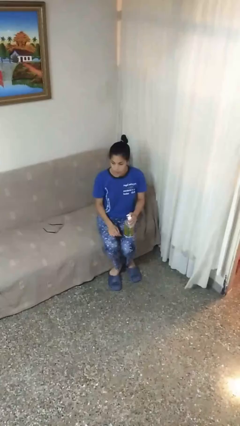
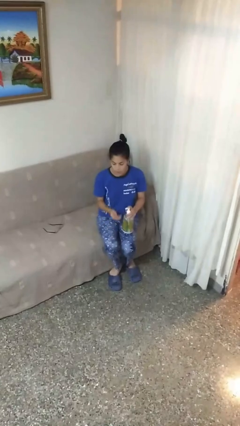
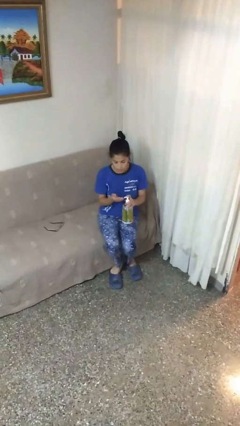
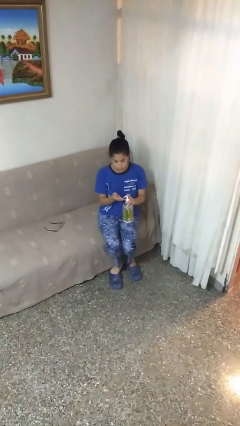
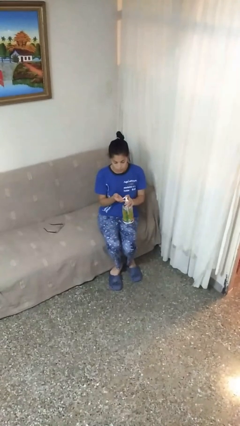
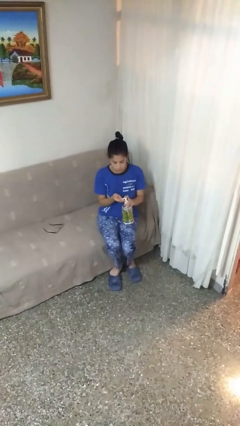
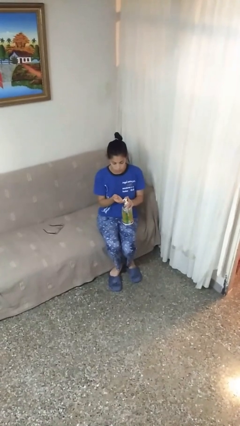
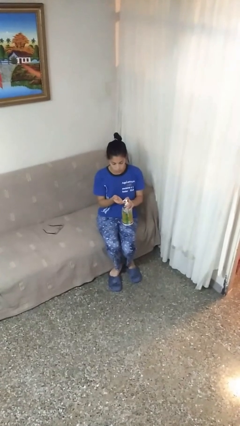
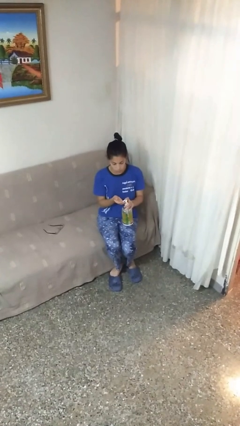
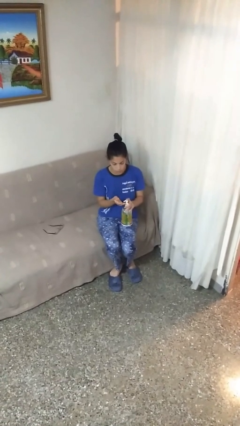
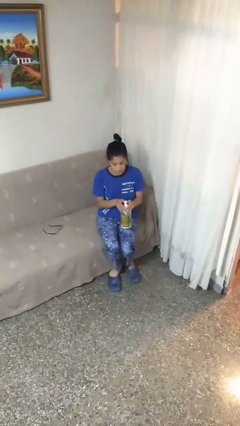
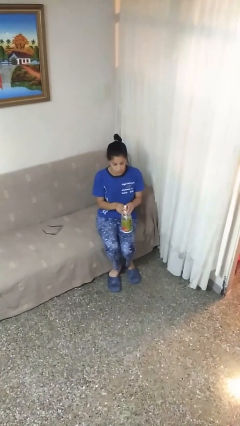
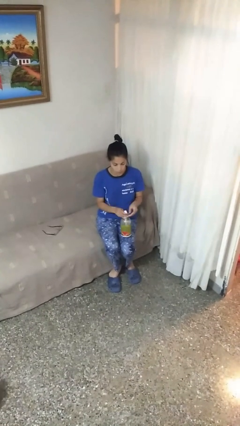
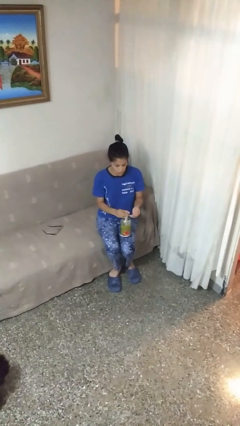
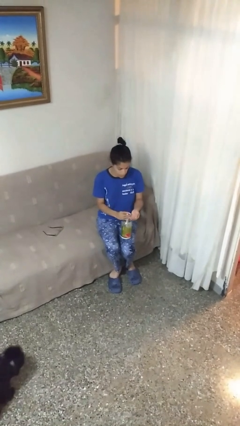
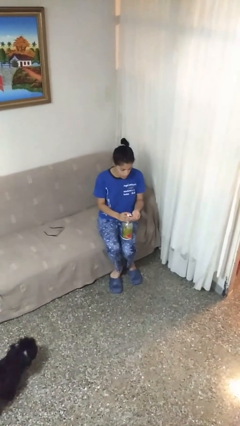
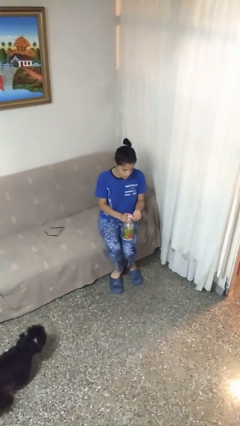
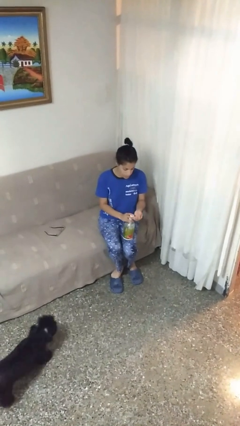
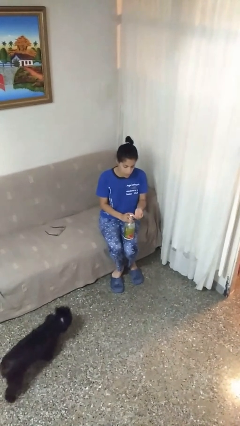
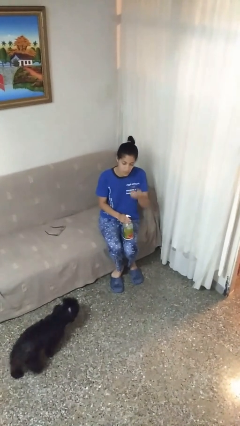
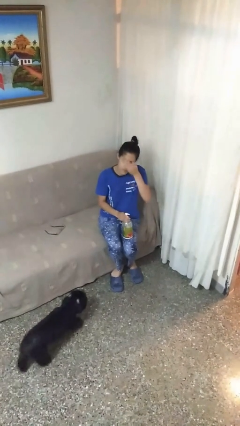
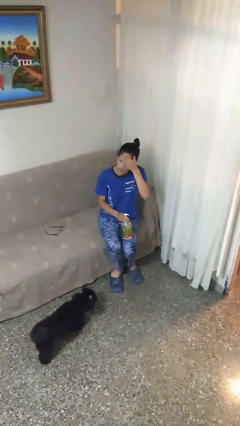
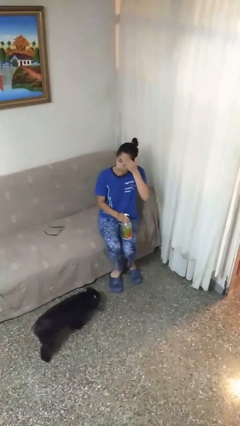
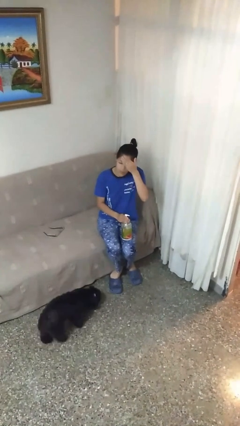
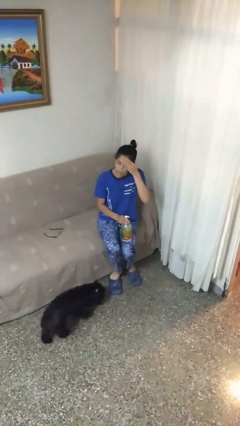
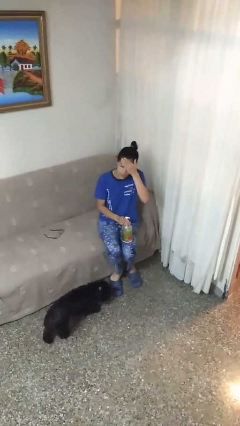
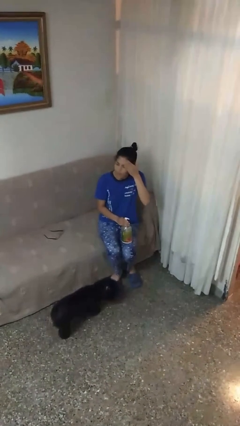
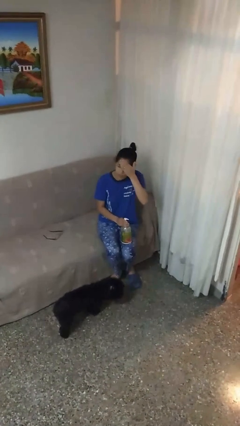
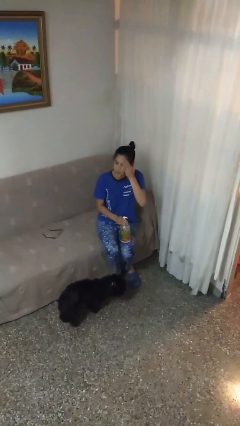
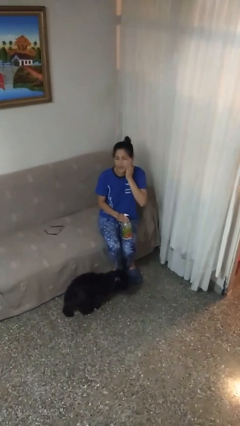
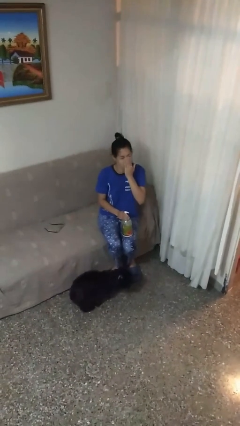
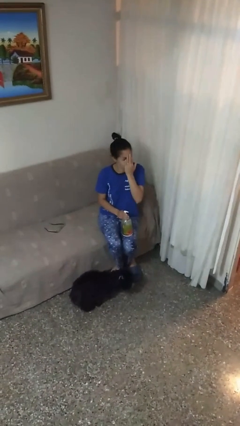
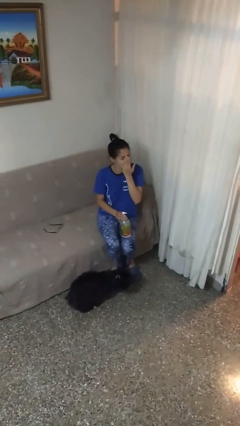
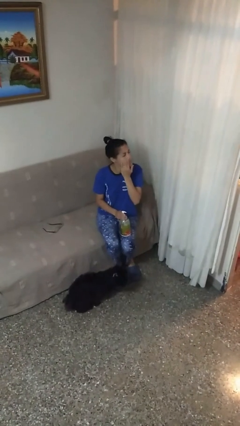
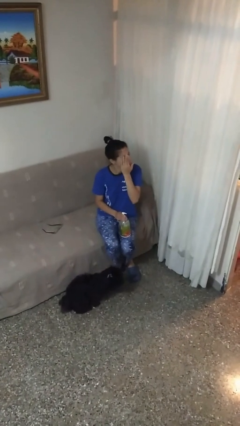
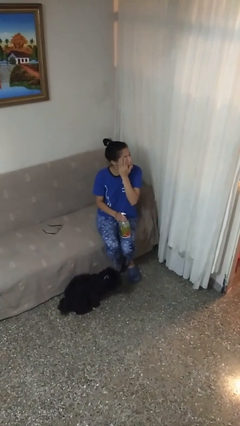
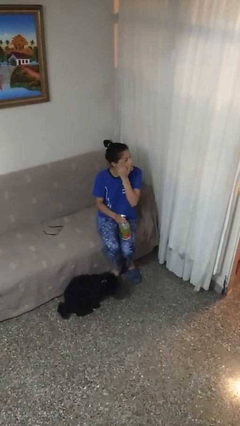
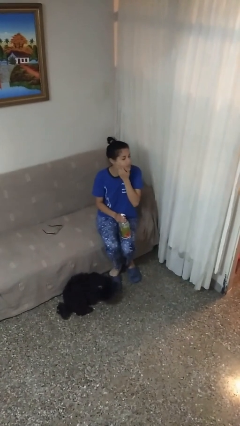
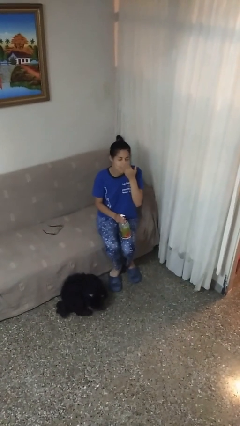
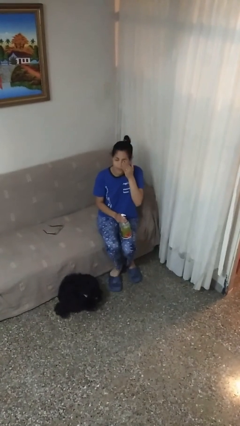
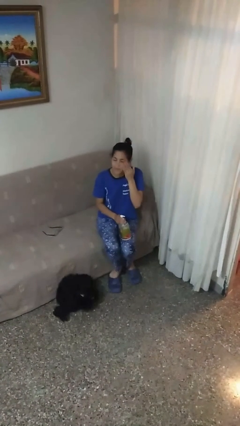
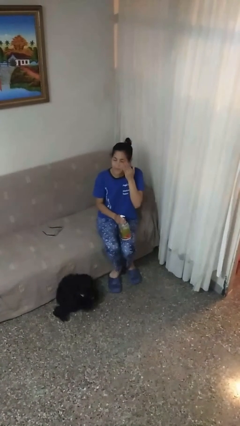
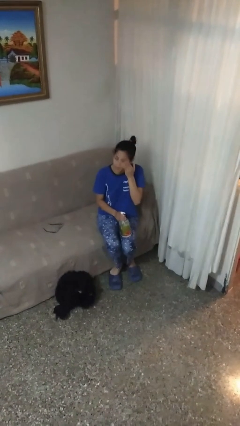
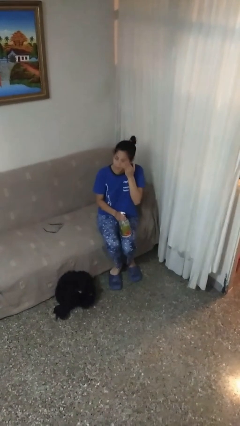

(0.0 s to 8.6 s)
person applies facial moisturizer

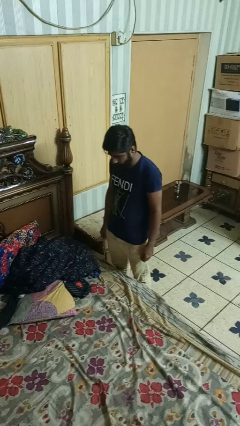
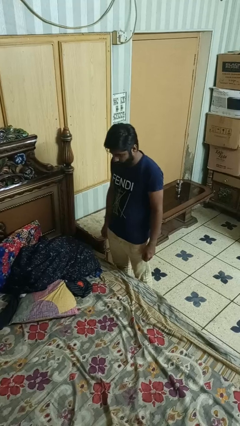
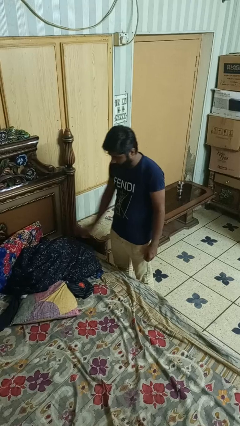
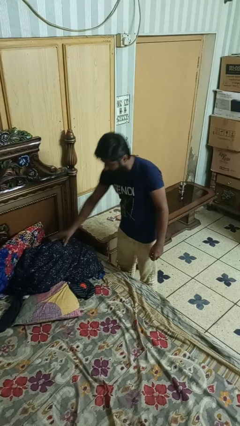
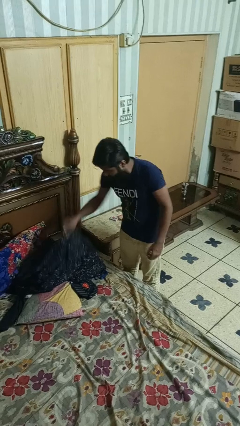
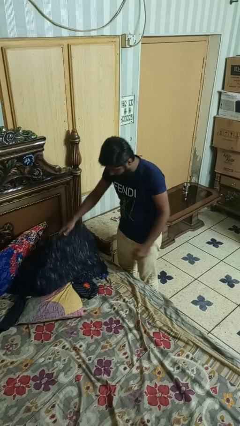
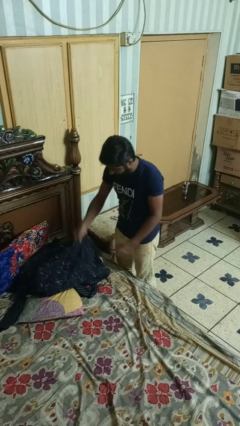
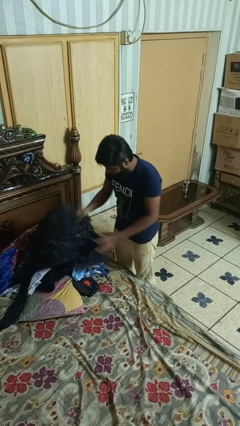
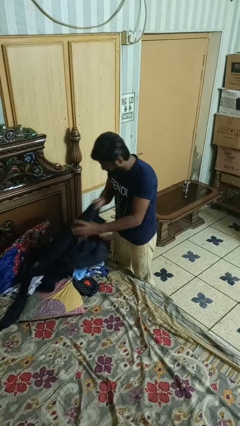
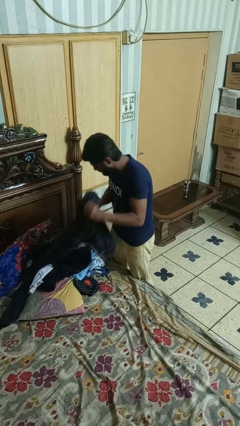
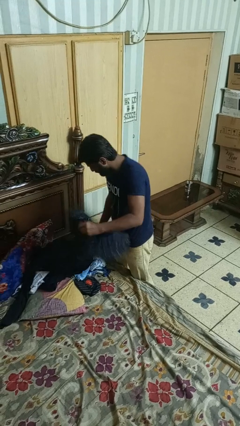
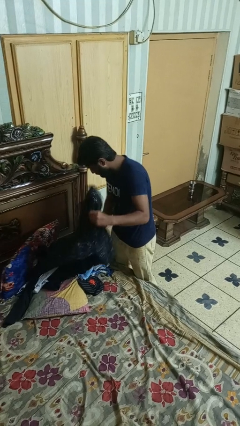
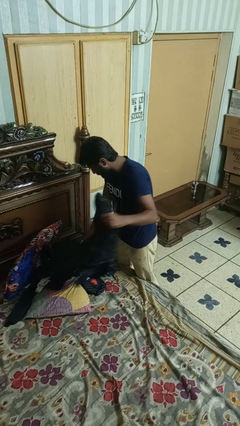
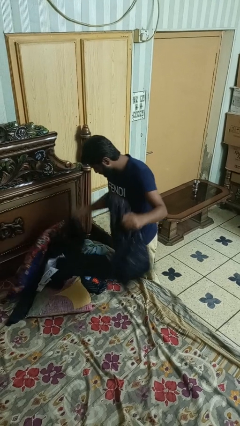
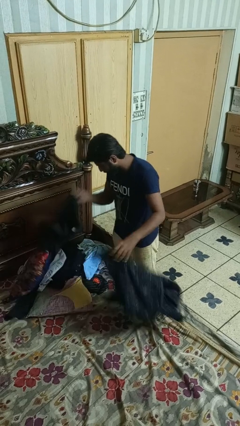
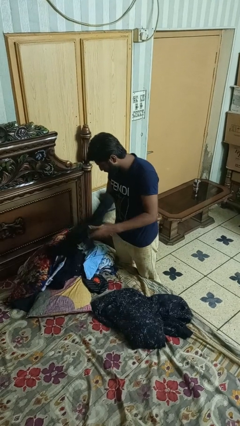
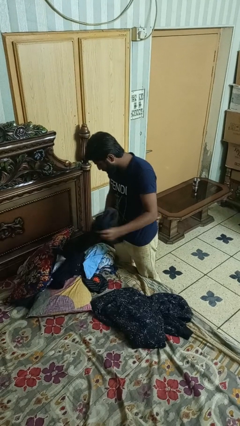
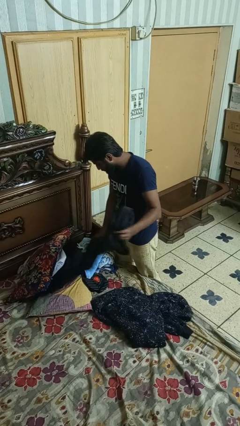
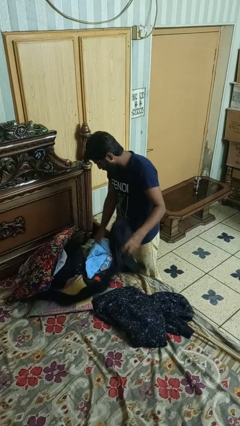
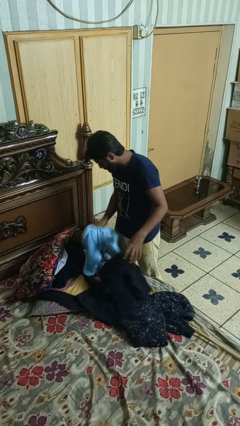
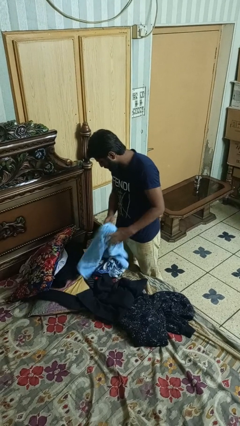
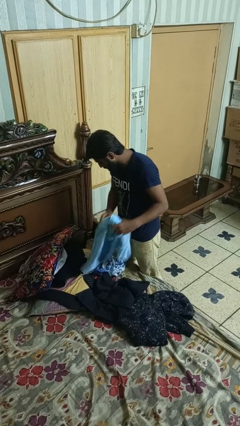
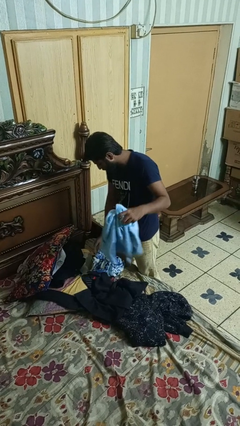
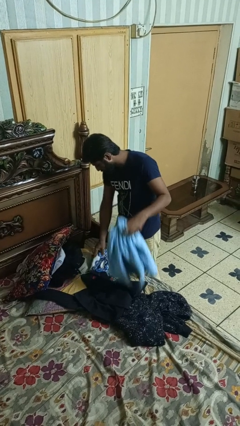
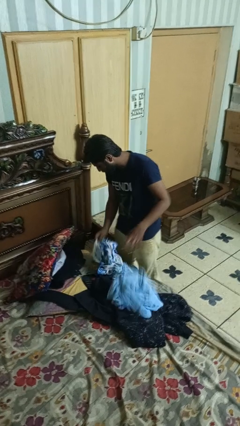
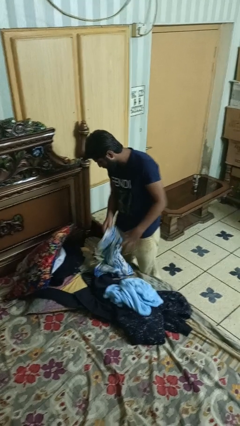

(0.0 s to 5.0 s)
person searches under bed

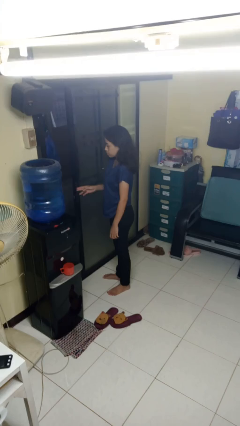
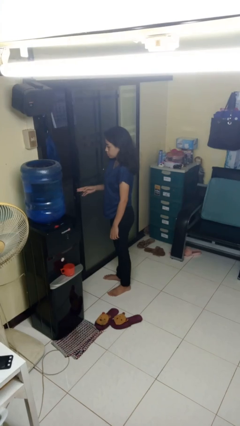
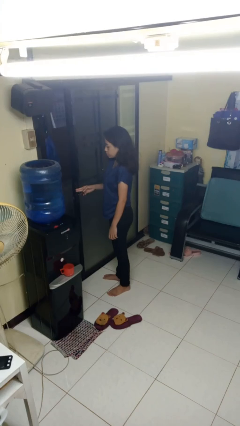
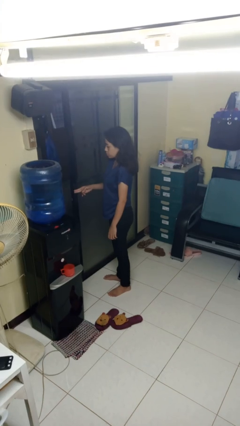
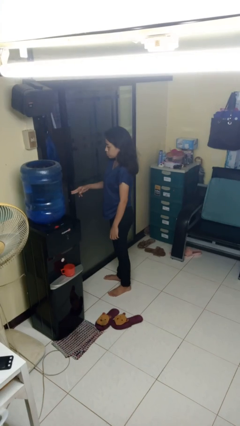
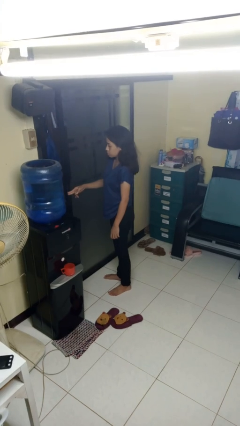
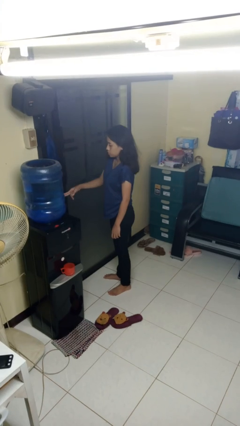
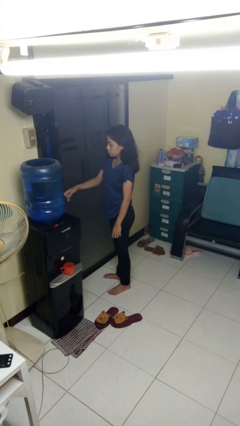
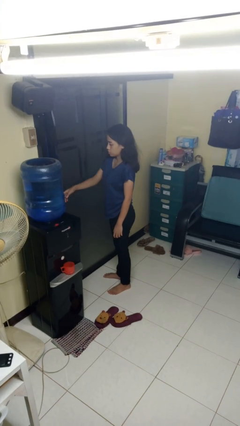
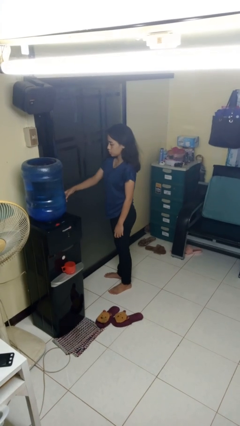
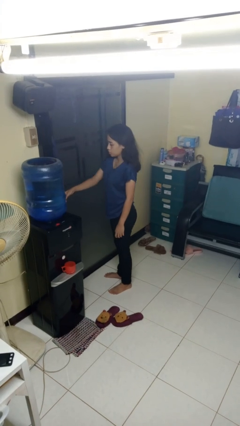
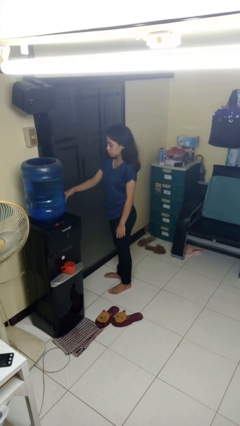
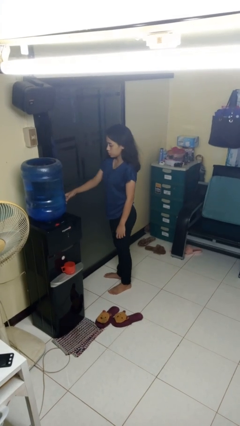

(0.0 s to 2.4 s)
person closes sliding door

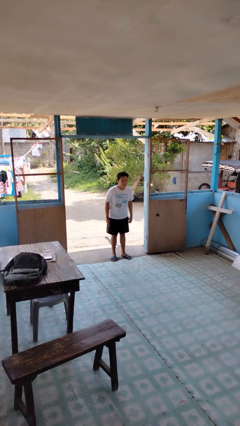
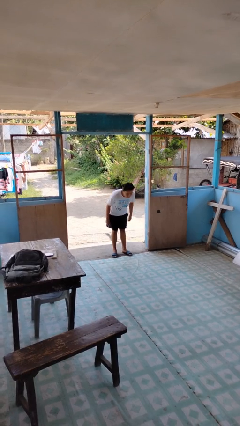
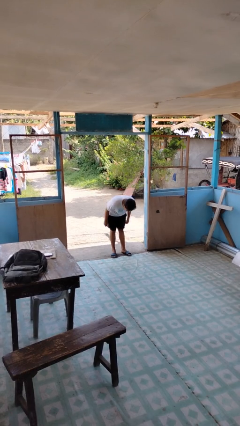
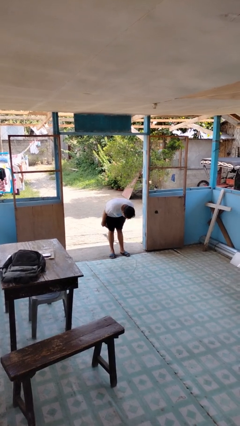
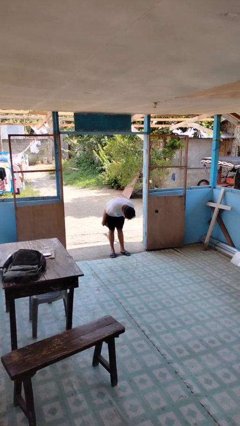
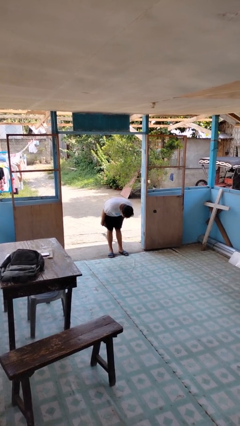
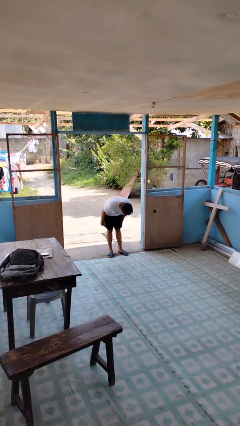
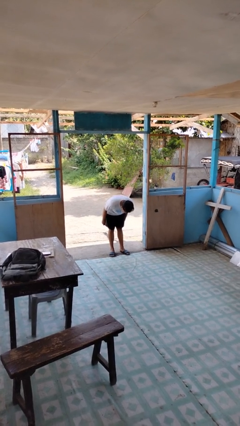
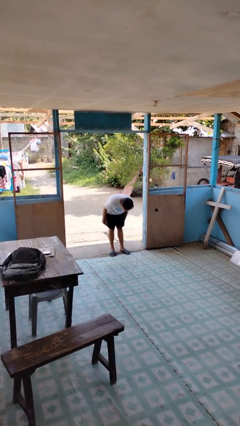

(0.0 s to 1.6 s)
person bows

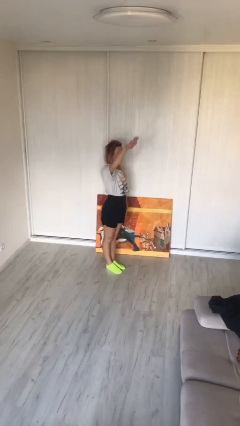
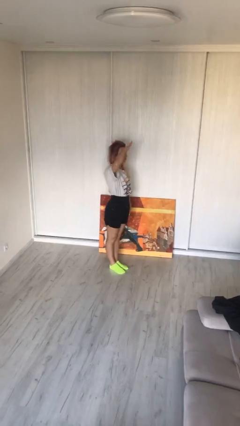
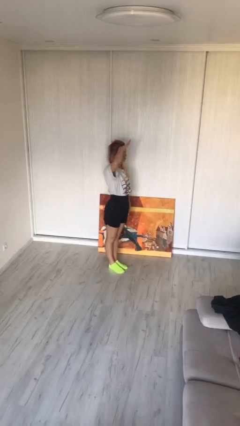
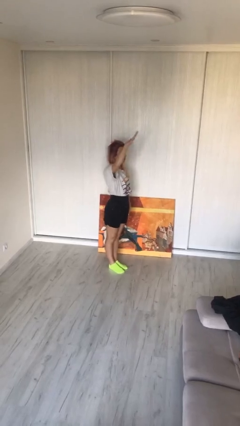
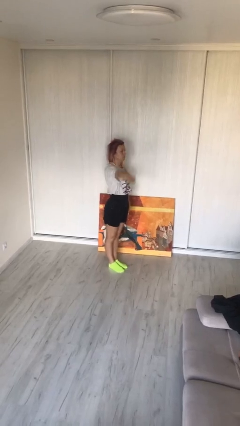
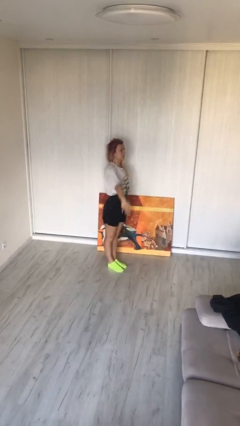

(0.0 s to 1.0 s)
person salutes
